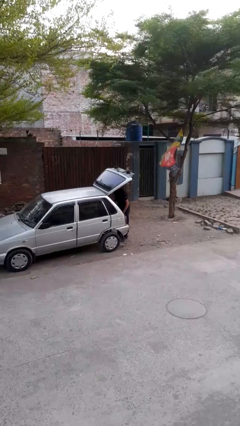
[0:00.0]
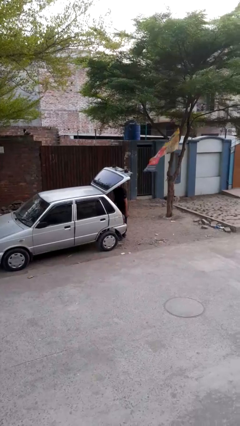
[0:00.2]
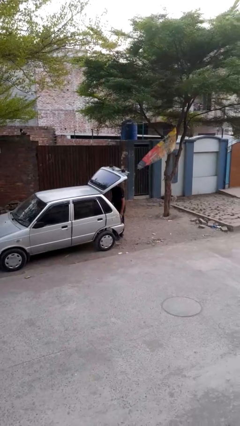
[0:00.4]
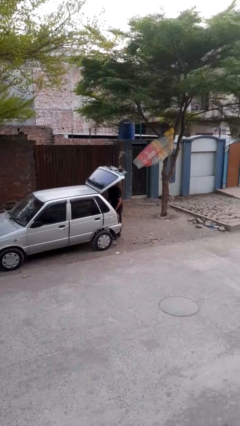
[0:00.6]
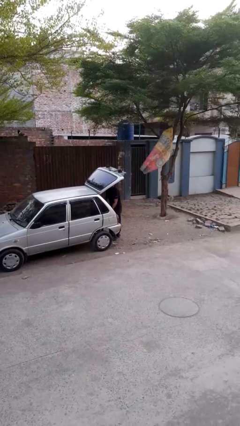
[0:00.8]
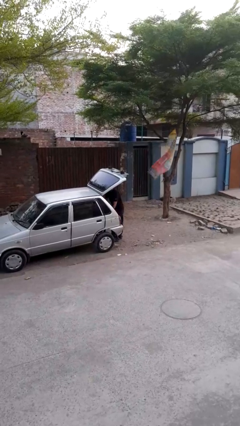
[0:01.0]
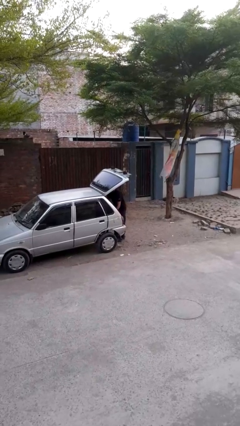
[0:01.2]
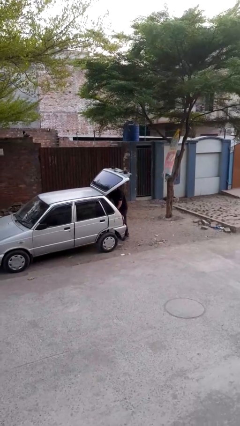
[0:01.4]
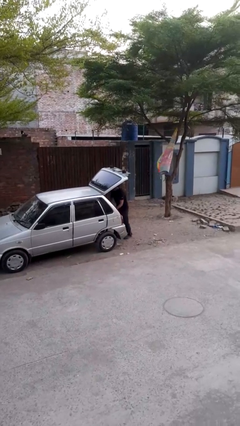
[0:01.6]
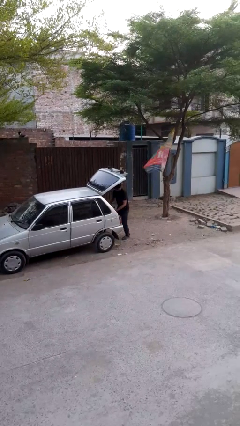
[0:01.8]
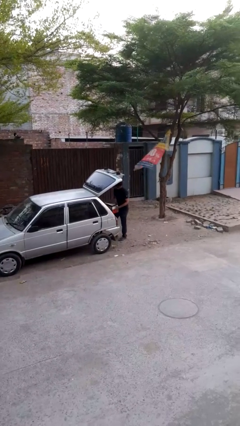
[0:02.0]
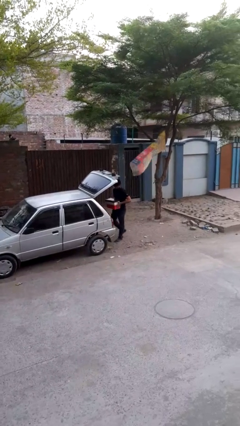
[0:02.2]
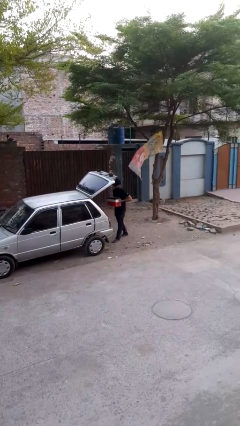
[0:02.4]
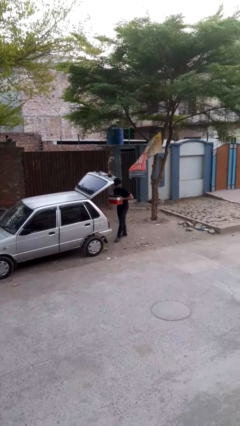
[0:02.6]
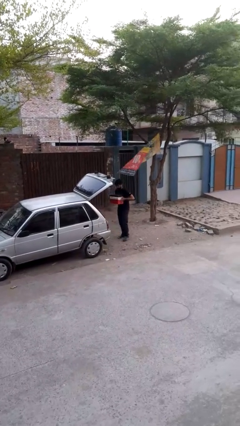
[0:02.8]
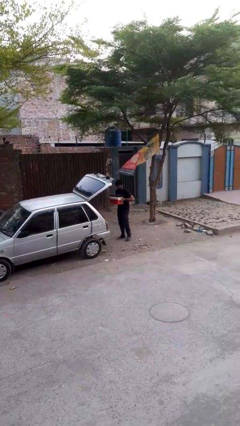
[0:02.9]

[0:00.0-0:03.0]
person unloads car

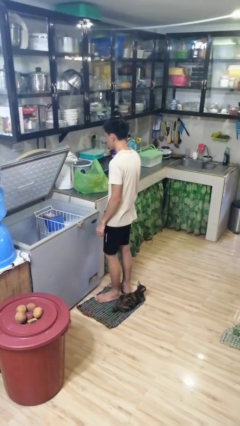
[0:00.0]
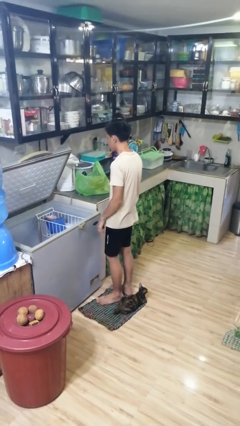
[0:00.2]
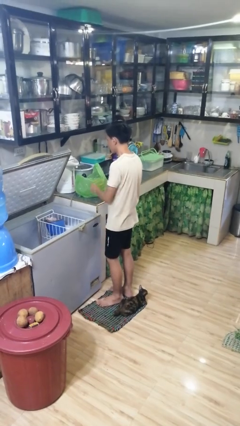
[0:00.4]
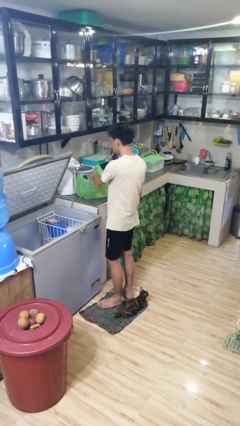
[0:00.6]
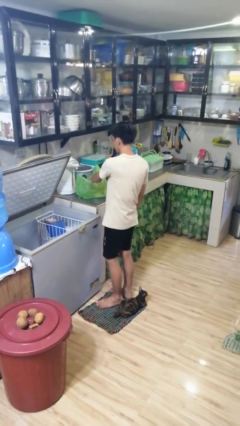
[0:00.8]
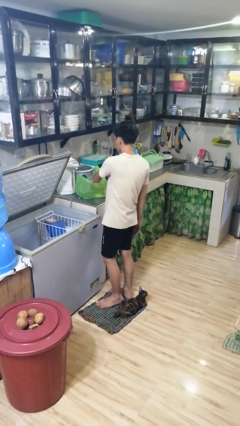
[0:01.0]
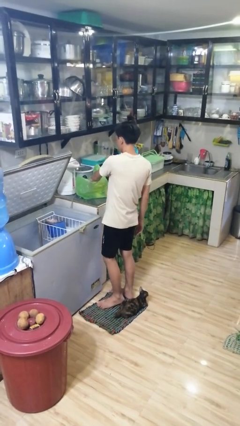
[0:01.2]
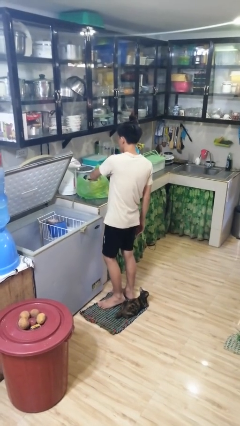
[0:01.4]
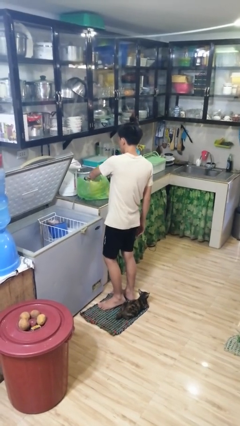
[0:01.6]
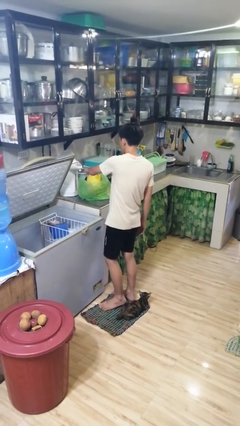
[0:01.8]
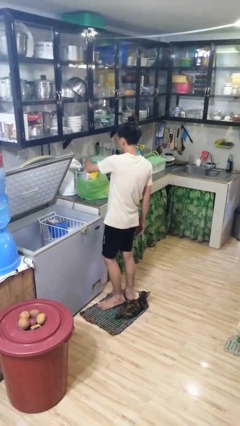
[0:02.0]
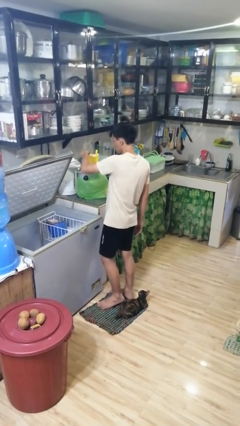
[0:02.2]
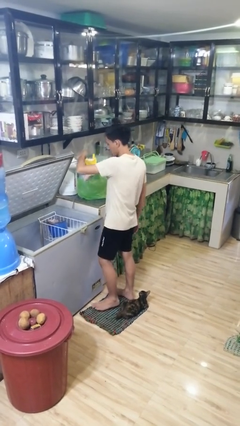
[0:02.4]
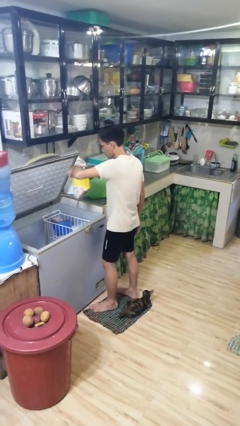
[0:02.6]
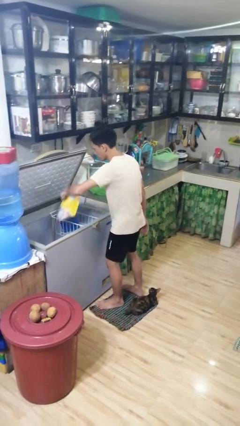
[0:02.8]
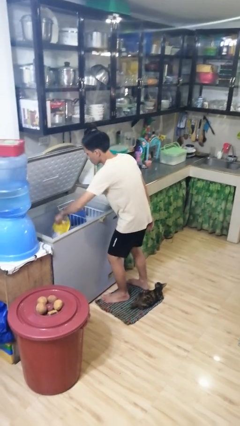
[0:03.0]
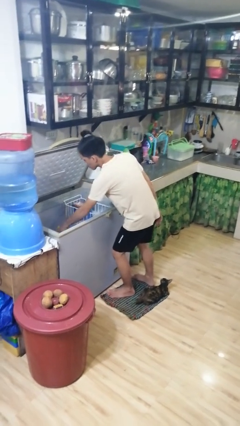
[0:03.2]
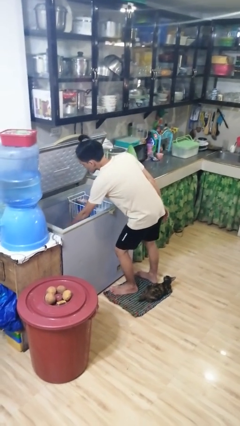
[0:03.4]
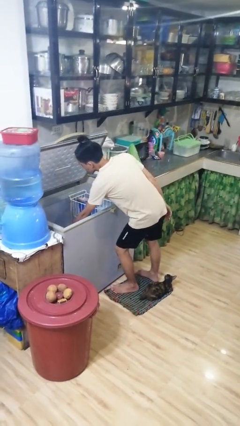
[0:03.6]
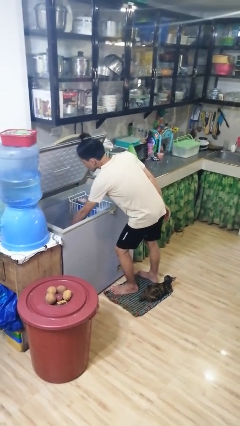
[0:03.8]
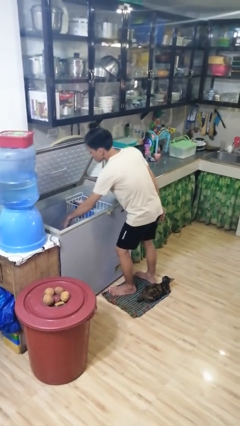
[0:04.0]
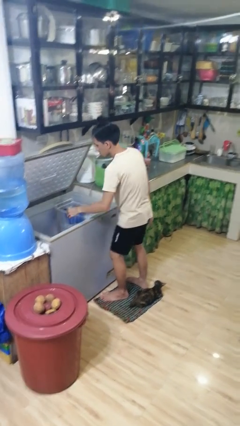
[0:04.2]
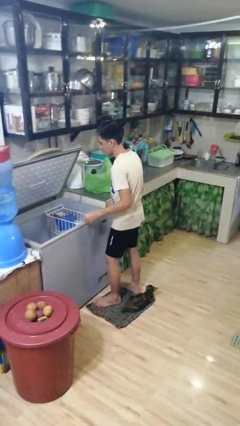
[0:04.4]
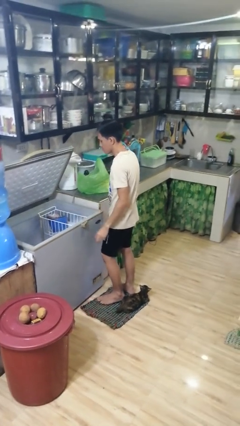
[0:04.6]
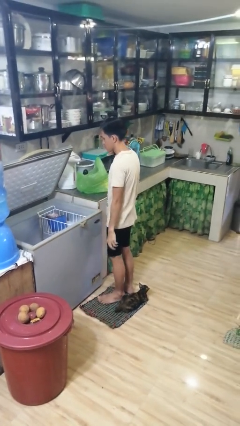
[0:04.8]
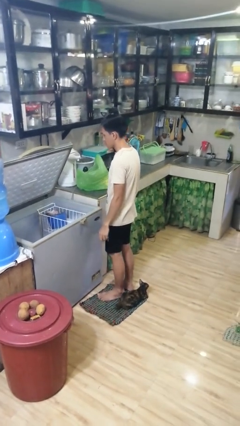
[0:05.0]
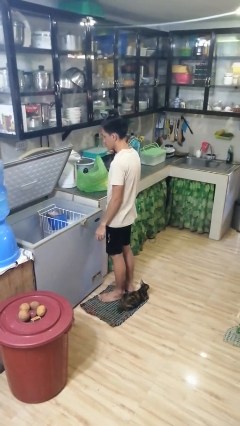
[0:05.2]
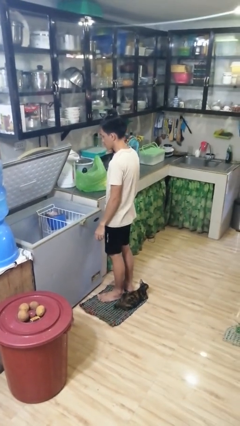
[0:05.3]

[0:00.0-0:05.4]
person loads groceries into refrigerator

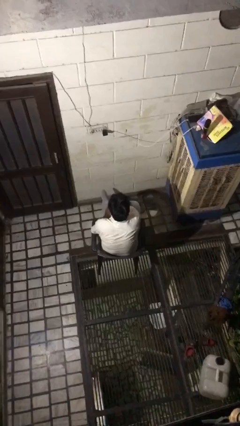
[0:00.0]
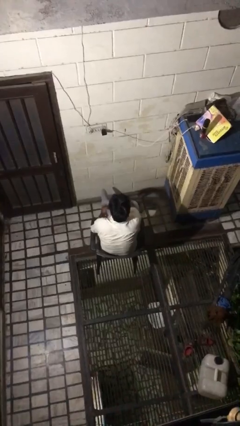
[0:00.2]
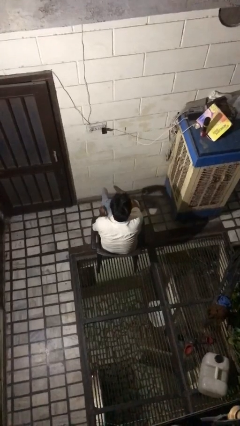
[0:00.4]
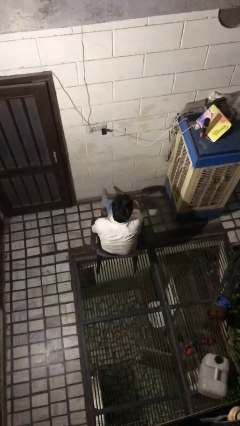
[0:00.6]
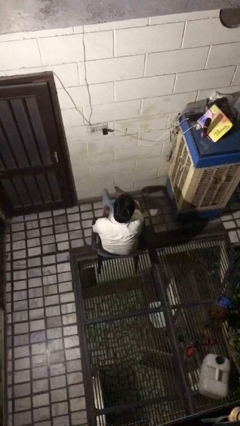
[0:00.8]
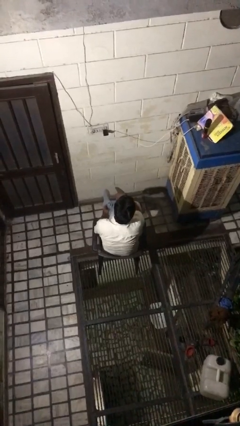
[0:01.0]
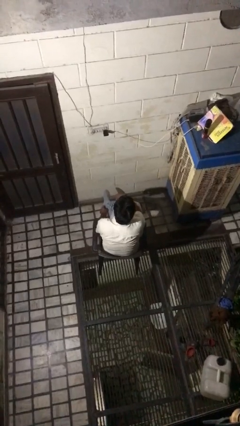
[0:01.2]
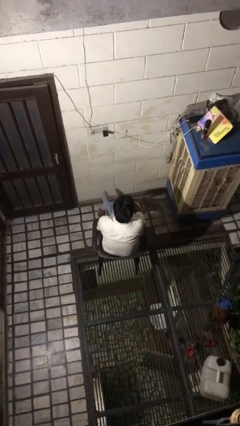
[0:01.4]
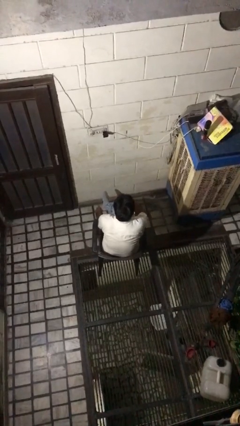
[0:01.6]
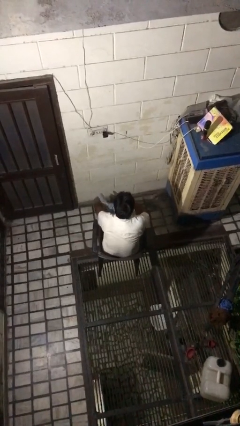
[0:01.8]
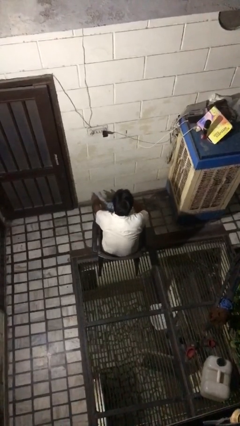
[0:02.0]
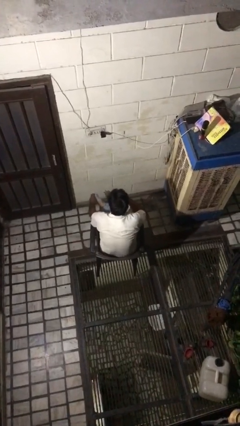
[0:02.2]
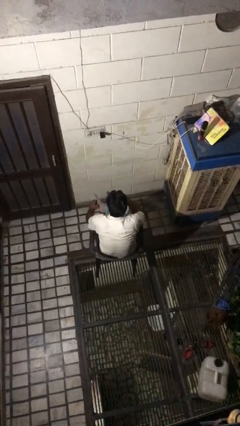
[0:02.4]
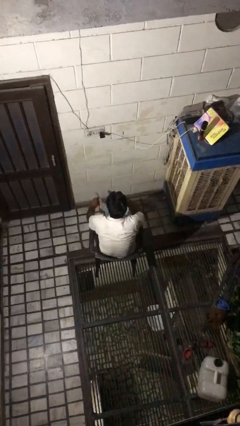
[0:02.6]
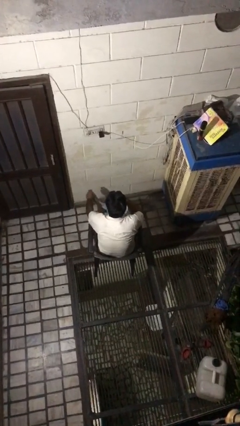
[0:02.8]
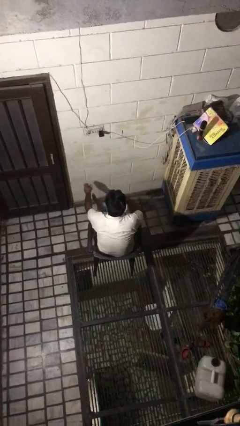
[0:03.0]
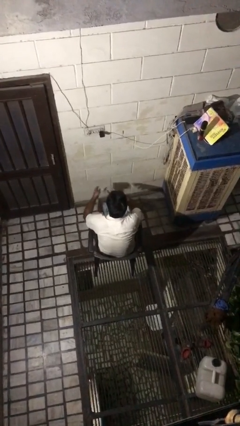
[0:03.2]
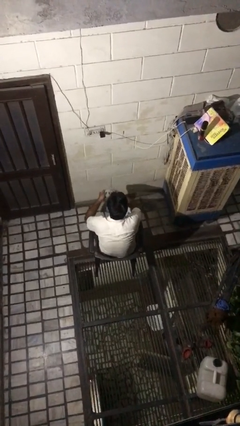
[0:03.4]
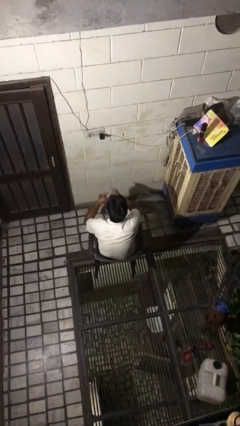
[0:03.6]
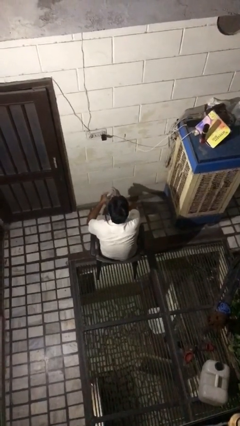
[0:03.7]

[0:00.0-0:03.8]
person takes off socks

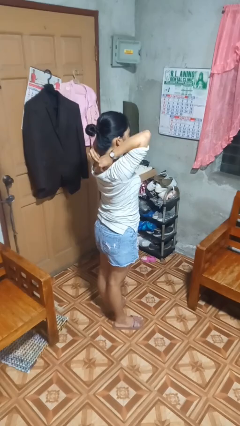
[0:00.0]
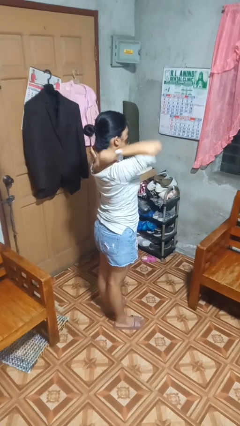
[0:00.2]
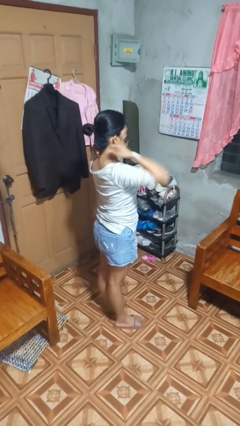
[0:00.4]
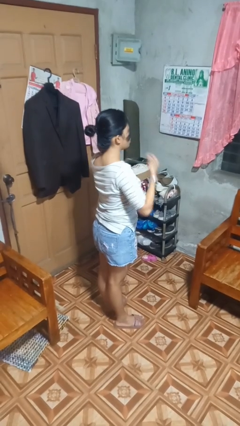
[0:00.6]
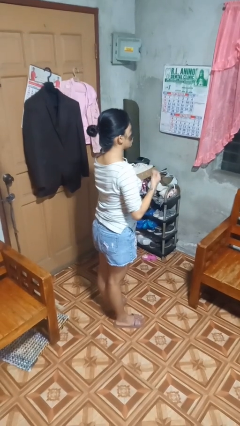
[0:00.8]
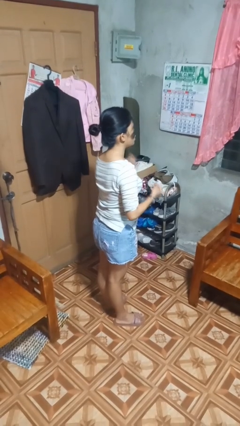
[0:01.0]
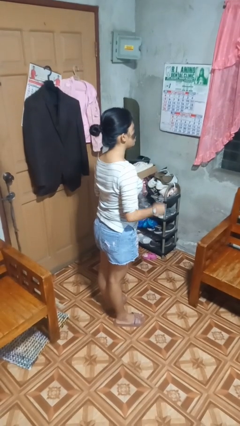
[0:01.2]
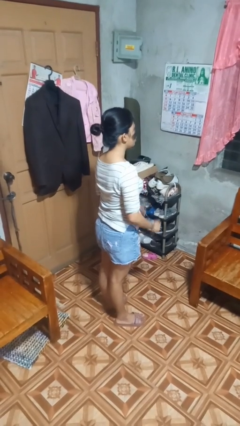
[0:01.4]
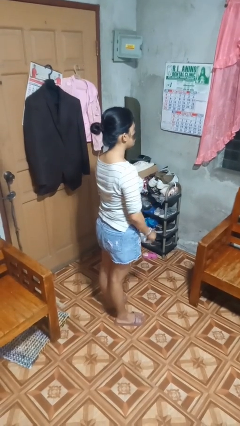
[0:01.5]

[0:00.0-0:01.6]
person takes off necklace

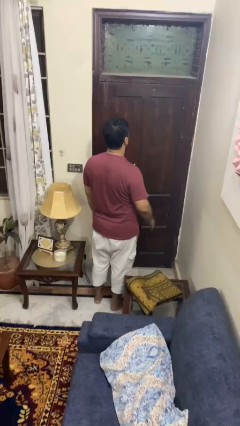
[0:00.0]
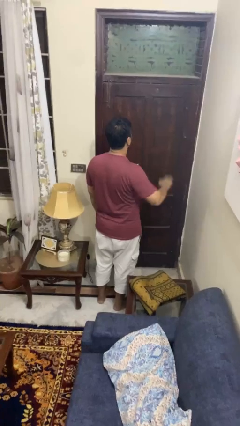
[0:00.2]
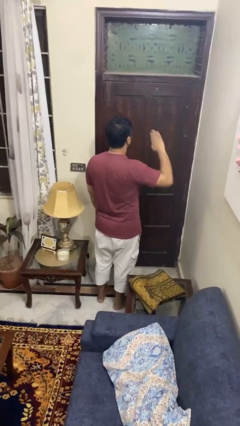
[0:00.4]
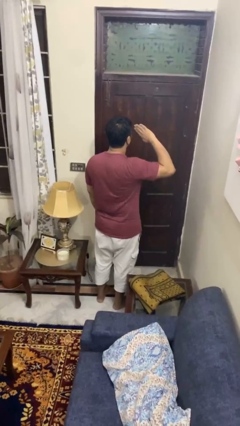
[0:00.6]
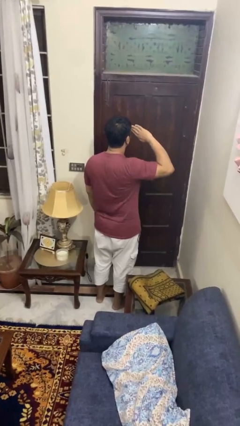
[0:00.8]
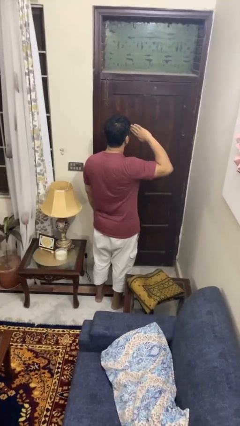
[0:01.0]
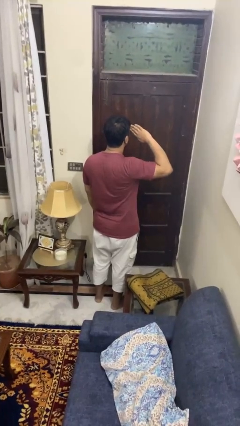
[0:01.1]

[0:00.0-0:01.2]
person salutes

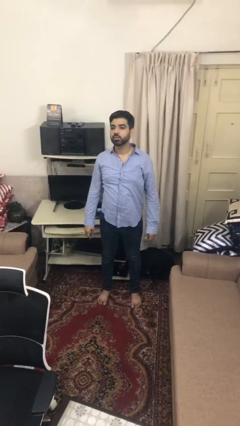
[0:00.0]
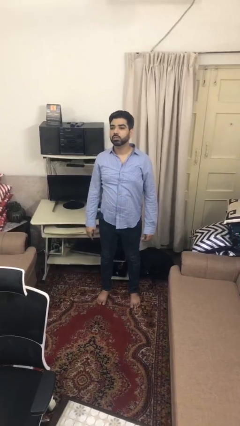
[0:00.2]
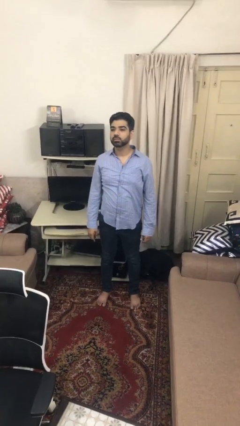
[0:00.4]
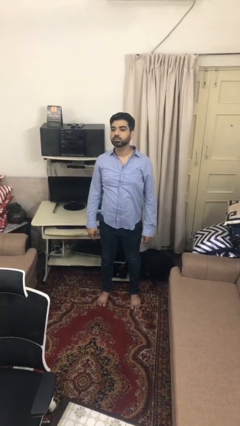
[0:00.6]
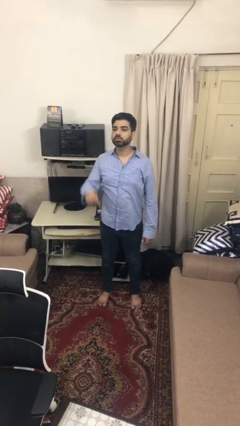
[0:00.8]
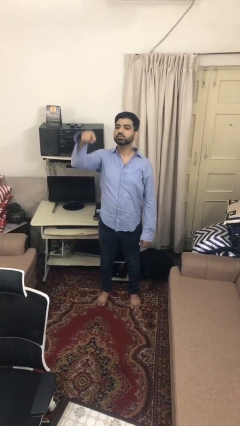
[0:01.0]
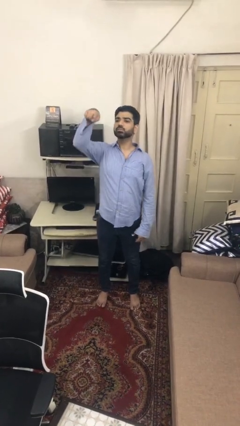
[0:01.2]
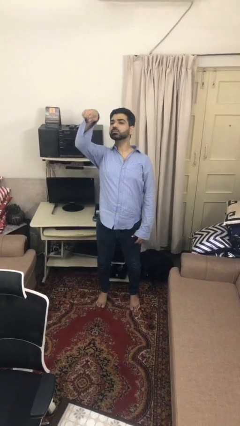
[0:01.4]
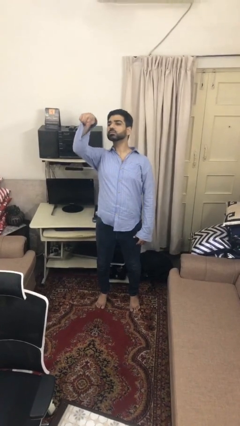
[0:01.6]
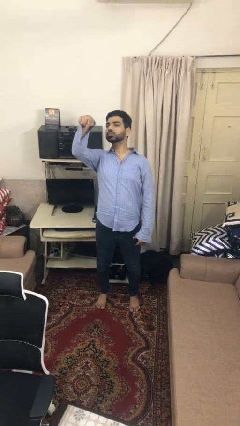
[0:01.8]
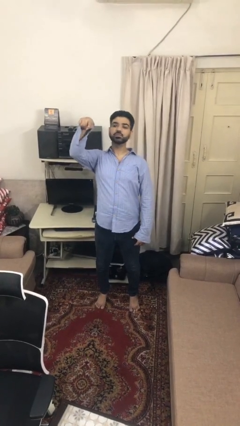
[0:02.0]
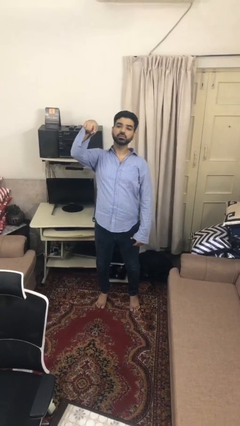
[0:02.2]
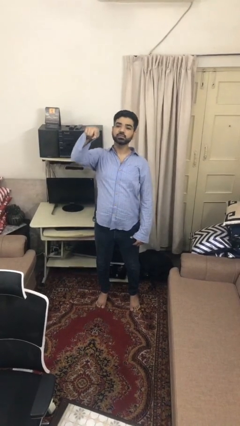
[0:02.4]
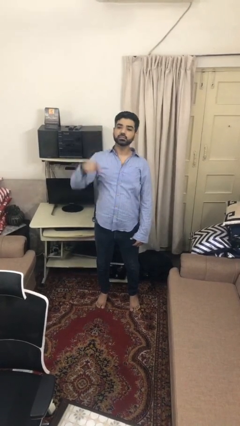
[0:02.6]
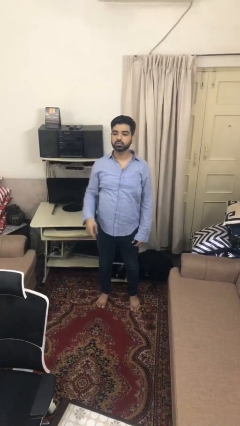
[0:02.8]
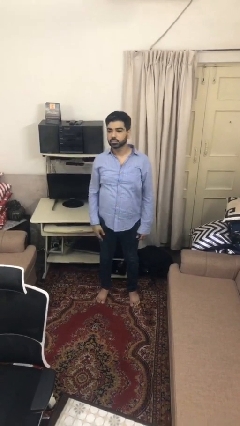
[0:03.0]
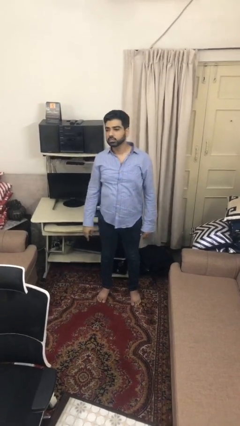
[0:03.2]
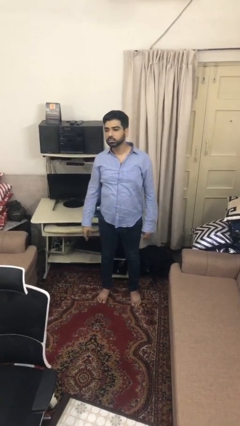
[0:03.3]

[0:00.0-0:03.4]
person points at person
